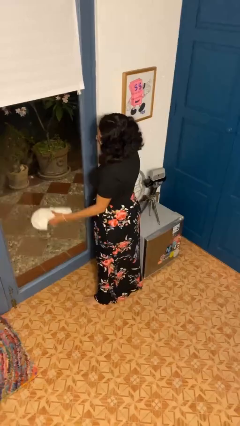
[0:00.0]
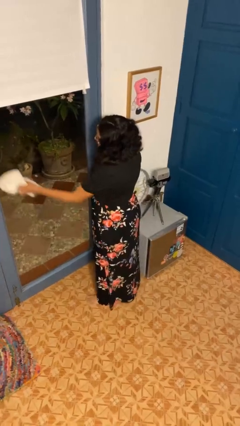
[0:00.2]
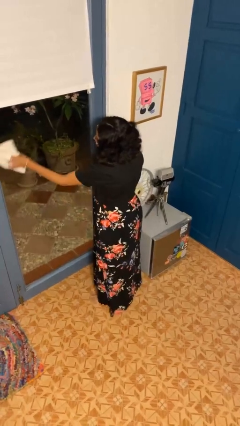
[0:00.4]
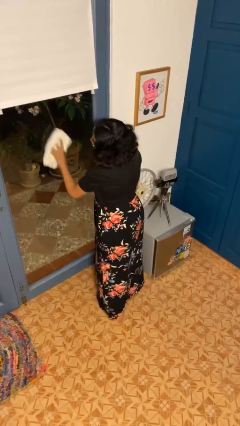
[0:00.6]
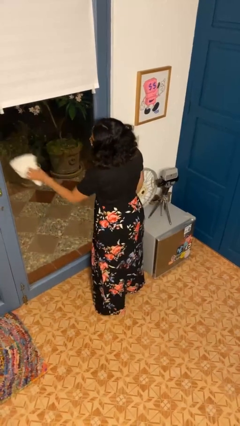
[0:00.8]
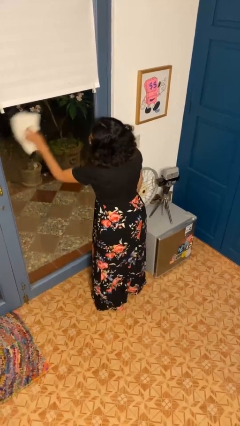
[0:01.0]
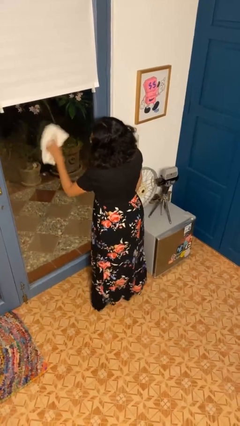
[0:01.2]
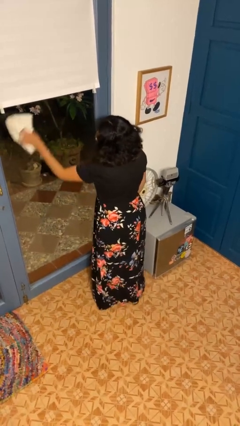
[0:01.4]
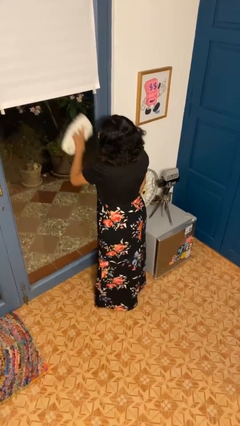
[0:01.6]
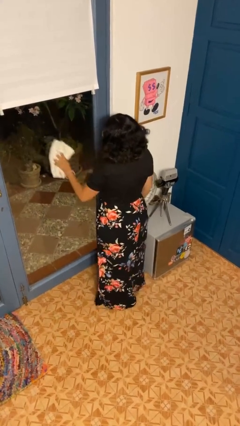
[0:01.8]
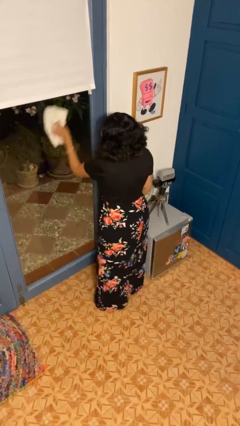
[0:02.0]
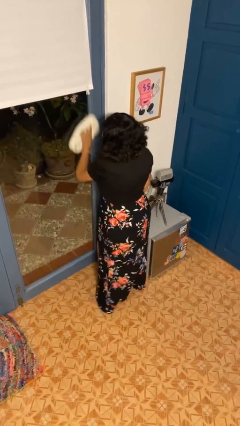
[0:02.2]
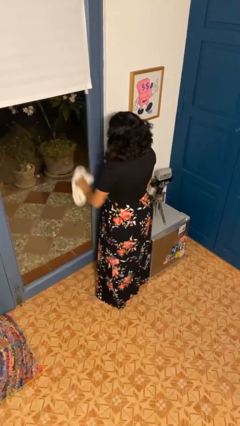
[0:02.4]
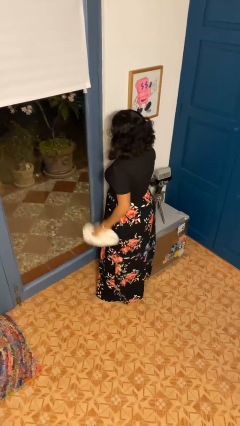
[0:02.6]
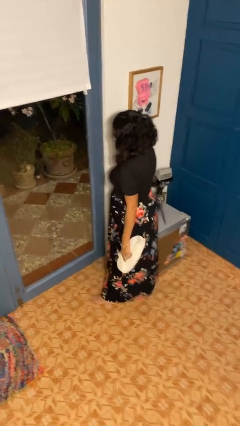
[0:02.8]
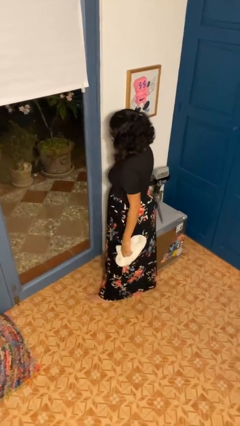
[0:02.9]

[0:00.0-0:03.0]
person washes window

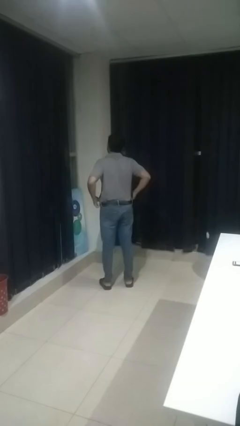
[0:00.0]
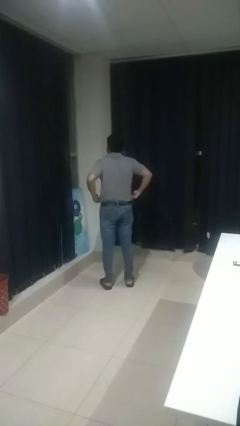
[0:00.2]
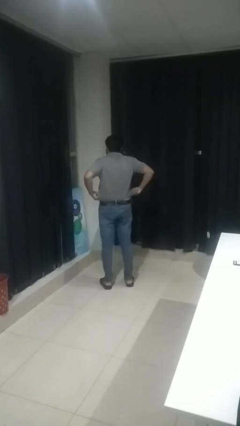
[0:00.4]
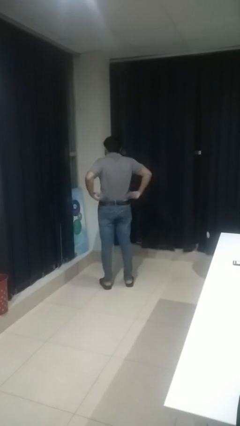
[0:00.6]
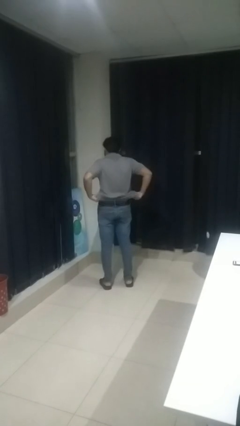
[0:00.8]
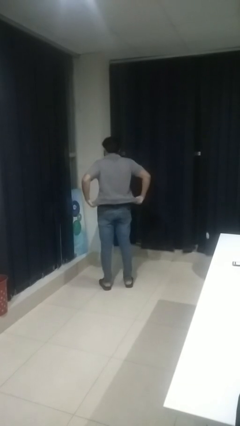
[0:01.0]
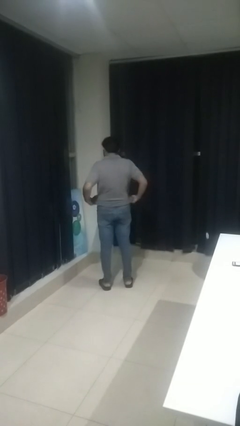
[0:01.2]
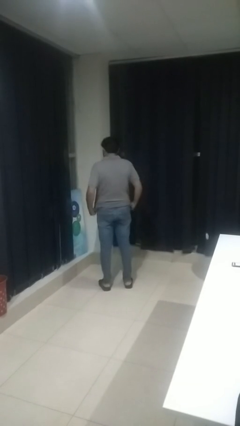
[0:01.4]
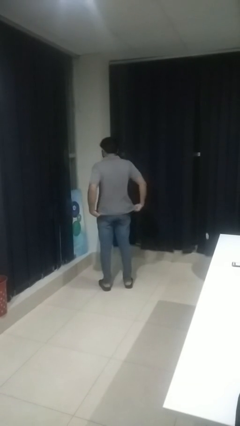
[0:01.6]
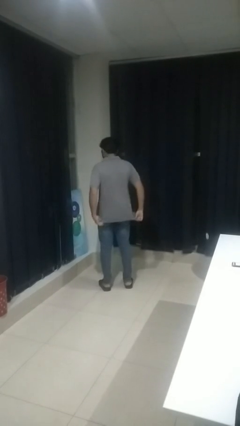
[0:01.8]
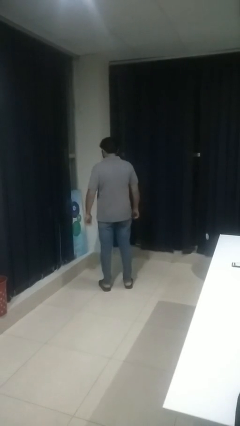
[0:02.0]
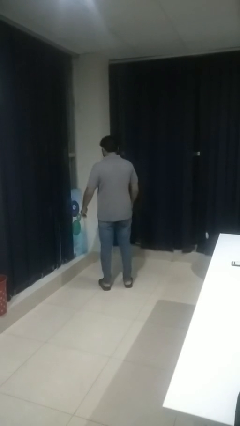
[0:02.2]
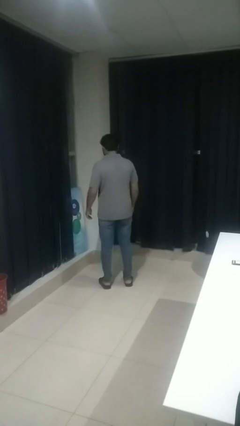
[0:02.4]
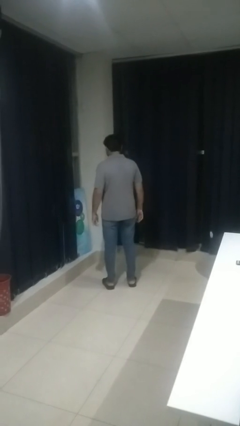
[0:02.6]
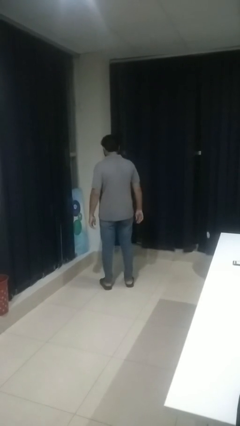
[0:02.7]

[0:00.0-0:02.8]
person untucks shirt

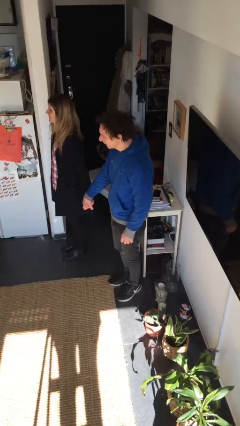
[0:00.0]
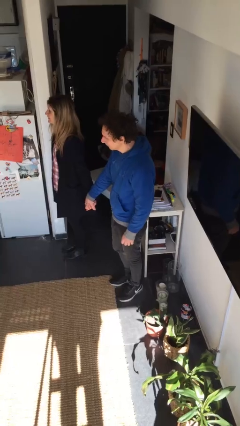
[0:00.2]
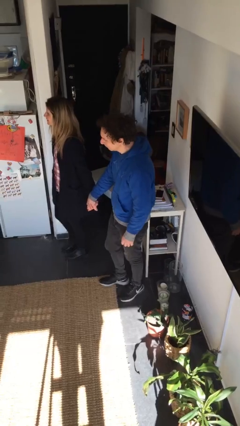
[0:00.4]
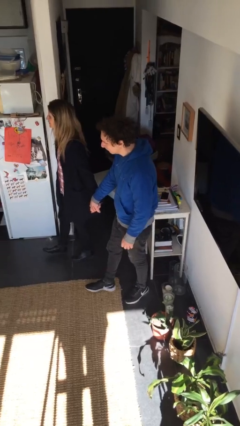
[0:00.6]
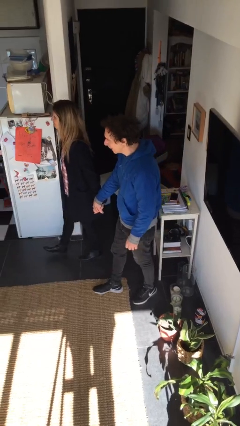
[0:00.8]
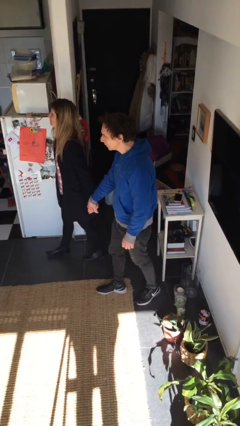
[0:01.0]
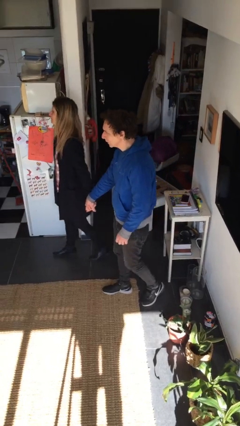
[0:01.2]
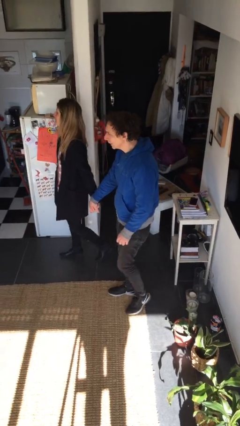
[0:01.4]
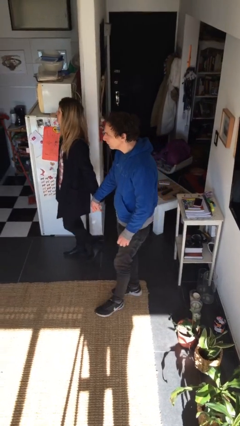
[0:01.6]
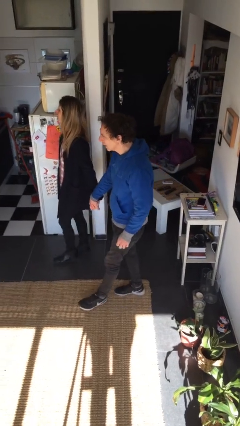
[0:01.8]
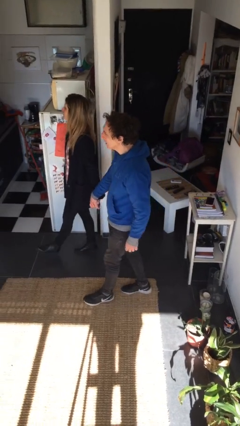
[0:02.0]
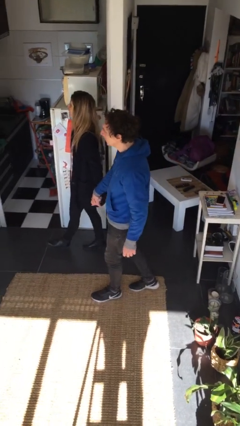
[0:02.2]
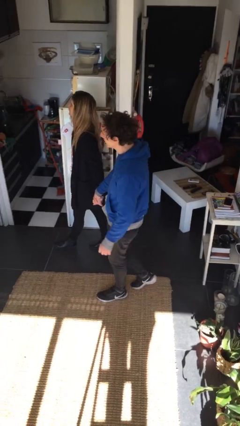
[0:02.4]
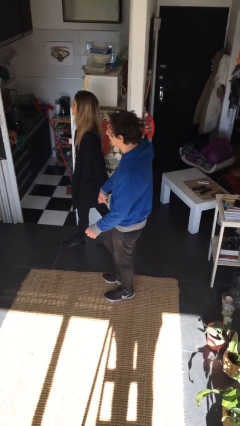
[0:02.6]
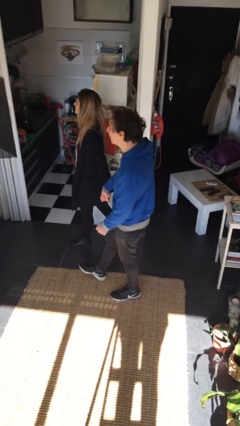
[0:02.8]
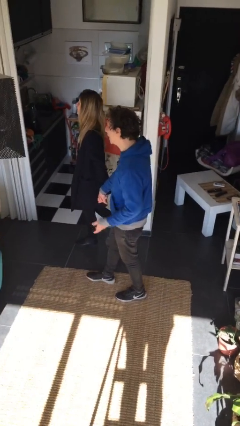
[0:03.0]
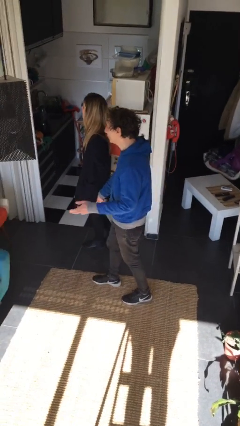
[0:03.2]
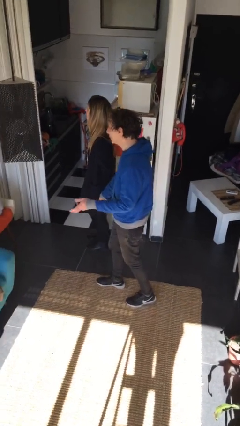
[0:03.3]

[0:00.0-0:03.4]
person holds hand

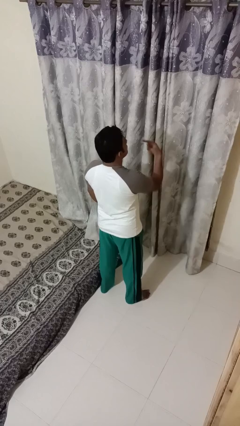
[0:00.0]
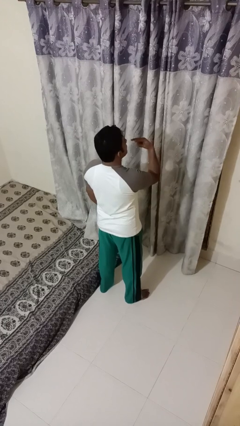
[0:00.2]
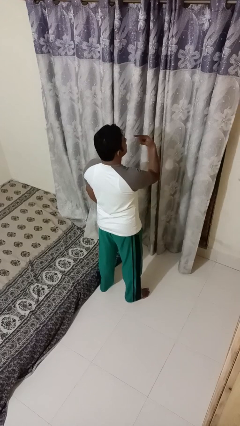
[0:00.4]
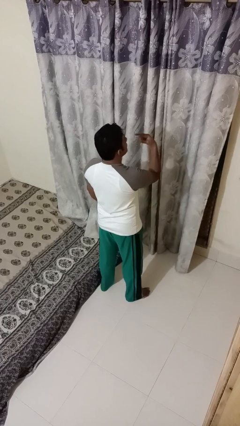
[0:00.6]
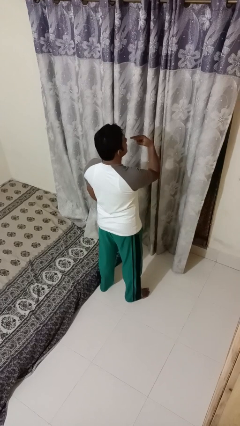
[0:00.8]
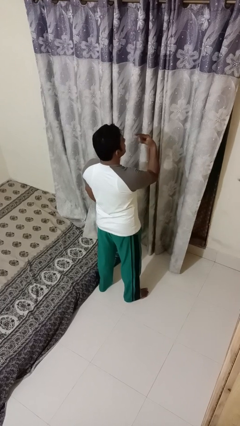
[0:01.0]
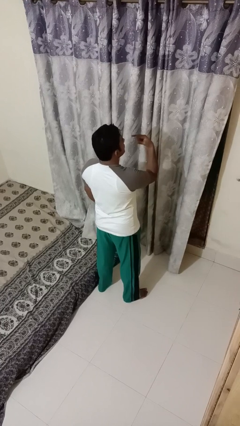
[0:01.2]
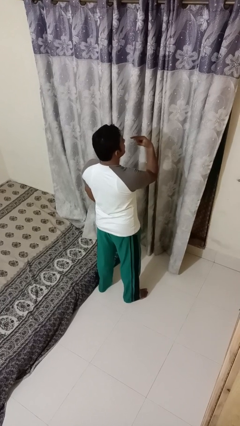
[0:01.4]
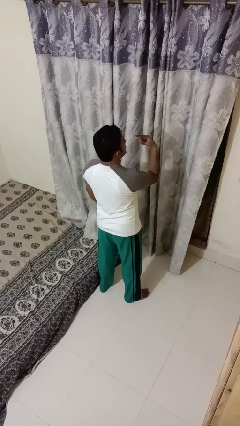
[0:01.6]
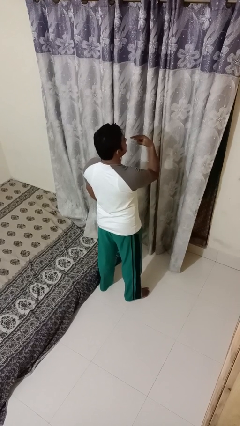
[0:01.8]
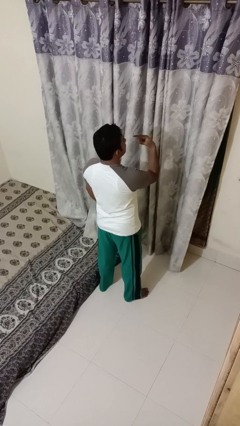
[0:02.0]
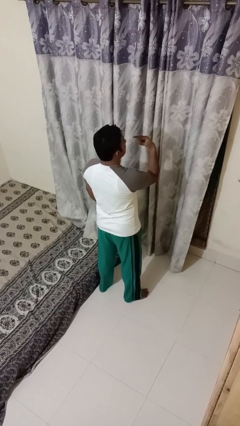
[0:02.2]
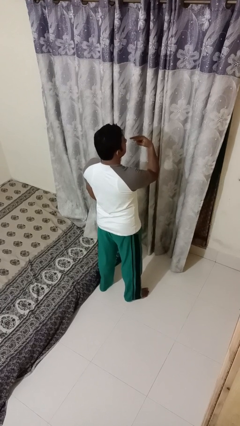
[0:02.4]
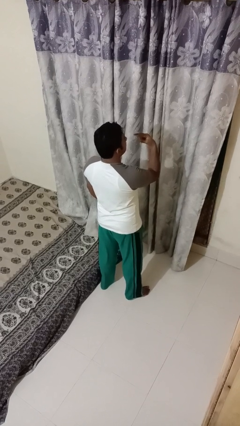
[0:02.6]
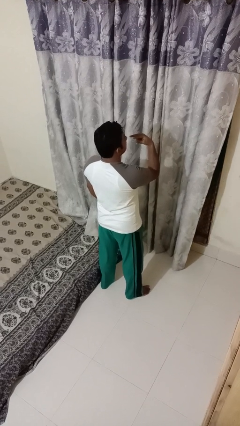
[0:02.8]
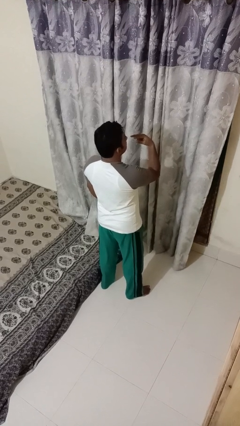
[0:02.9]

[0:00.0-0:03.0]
person gestures watch closely

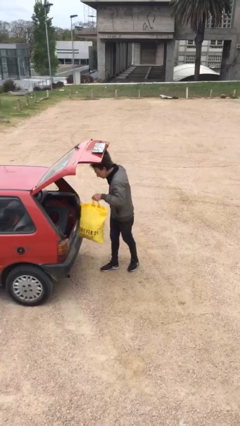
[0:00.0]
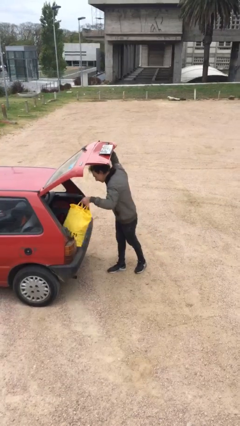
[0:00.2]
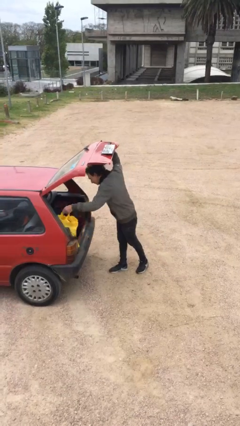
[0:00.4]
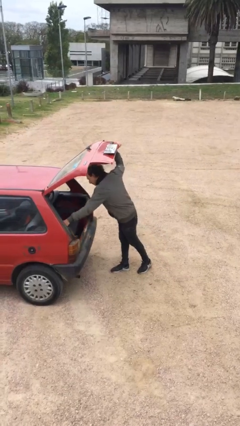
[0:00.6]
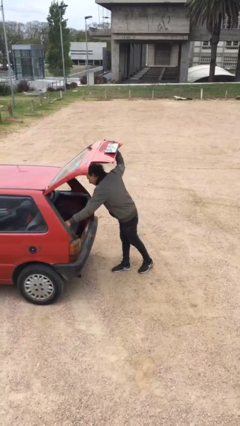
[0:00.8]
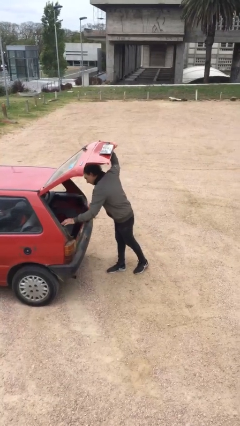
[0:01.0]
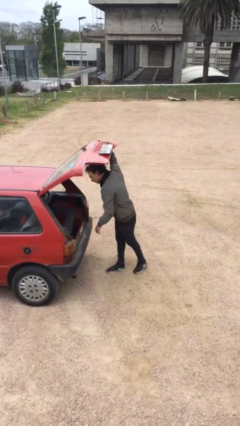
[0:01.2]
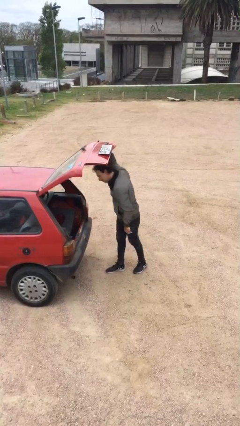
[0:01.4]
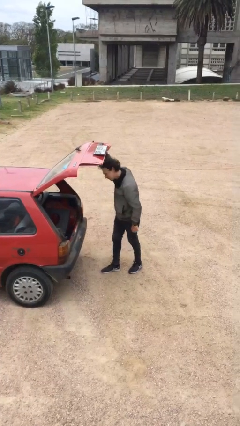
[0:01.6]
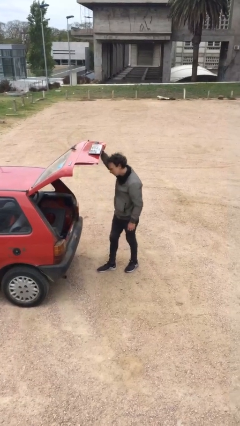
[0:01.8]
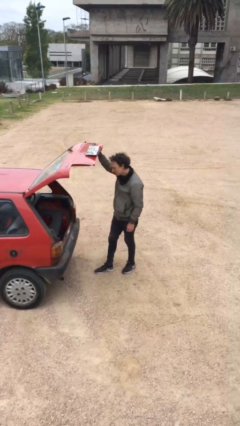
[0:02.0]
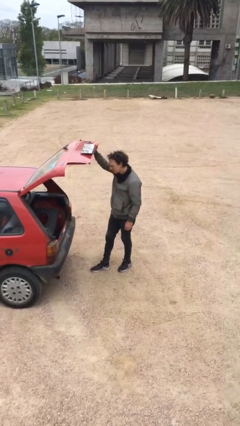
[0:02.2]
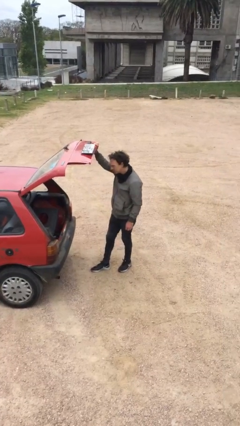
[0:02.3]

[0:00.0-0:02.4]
person loads car

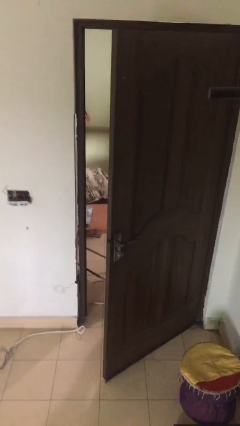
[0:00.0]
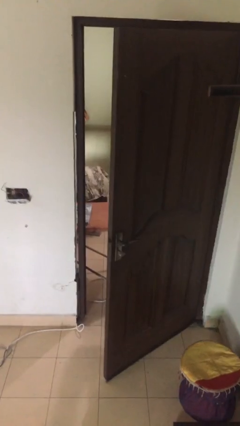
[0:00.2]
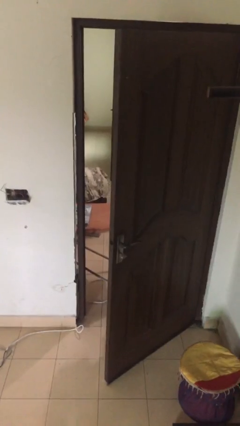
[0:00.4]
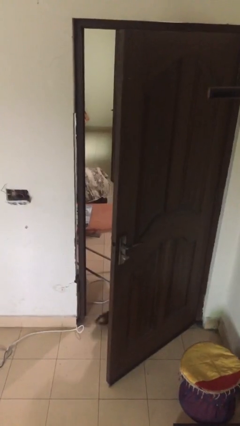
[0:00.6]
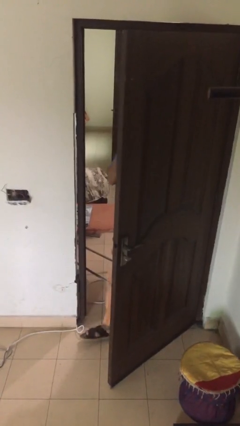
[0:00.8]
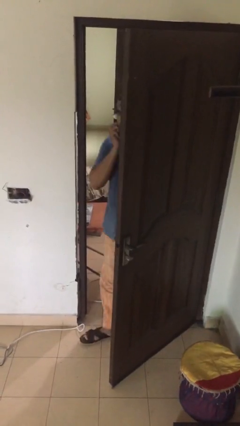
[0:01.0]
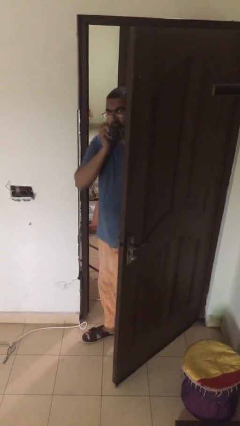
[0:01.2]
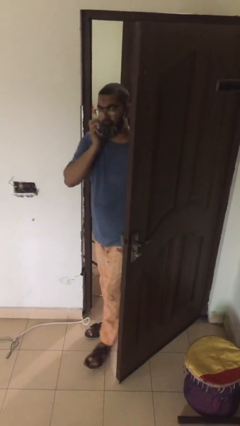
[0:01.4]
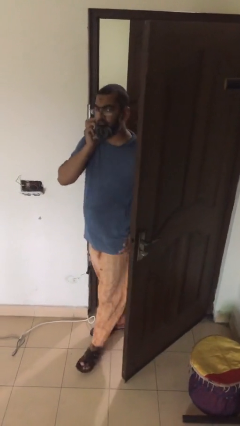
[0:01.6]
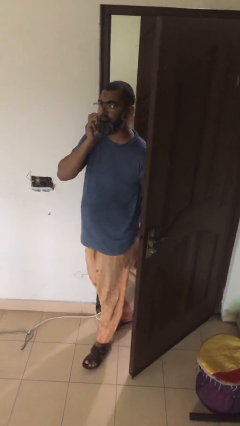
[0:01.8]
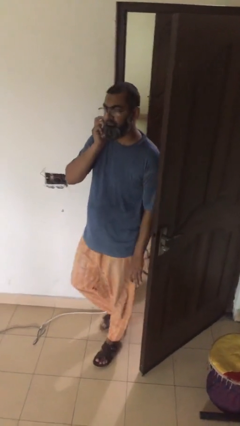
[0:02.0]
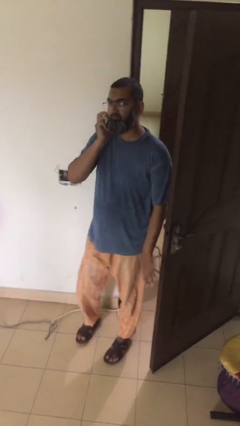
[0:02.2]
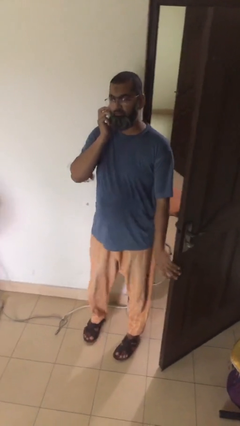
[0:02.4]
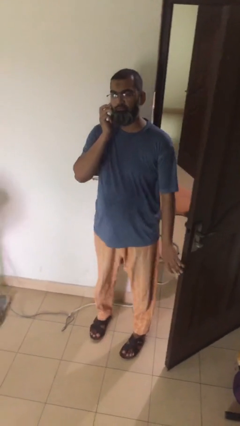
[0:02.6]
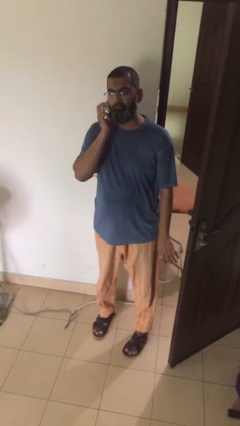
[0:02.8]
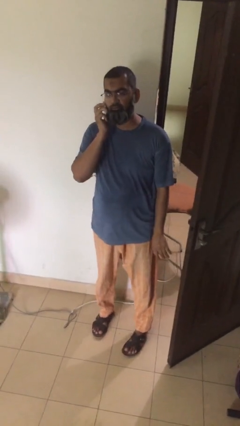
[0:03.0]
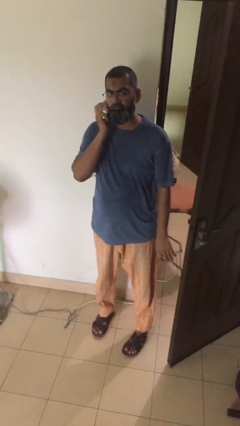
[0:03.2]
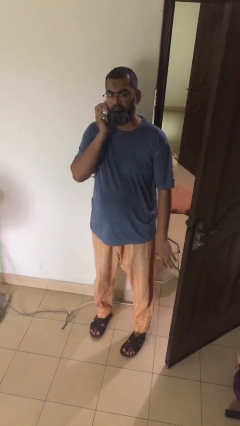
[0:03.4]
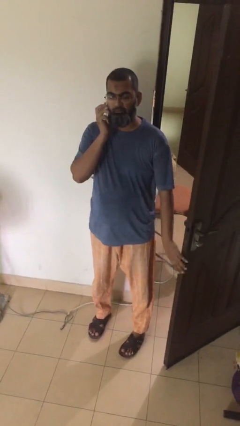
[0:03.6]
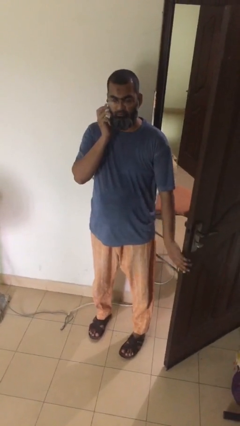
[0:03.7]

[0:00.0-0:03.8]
person enters scene through structure
